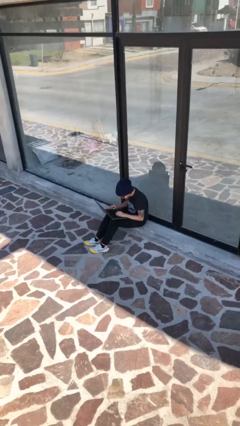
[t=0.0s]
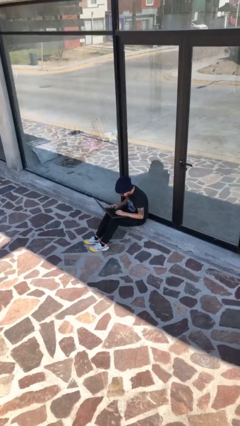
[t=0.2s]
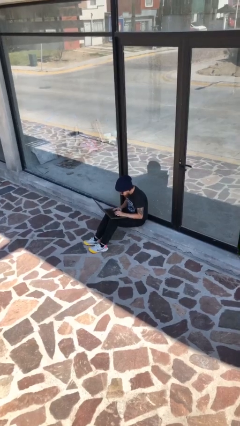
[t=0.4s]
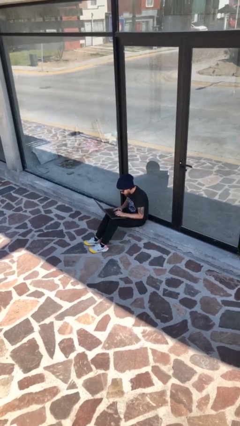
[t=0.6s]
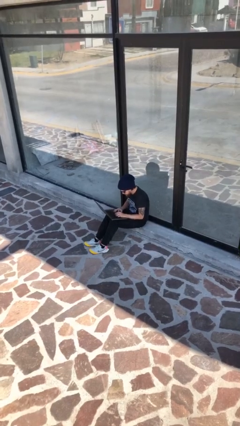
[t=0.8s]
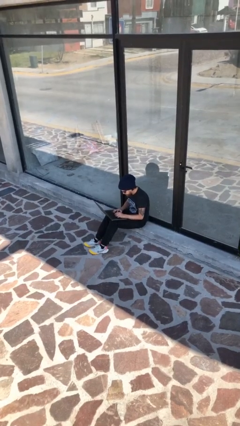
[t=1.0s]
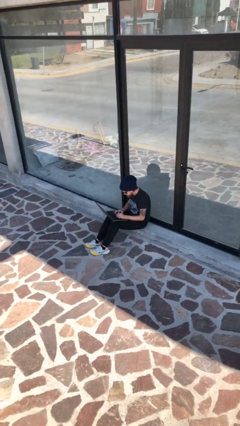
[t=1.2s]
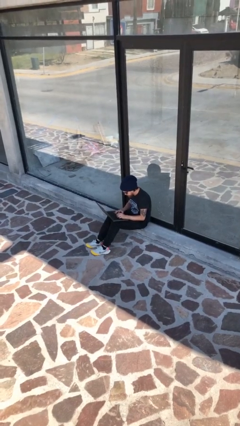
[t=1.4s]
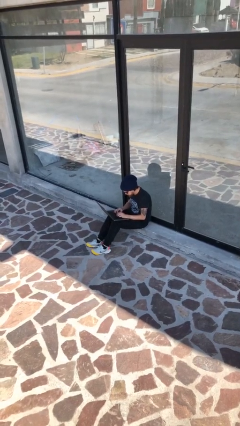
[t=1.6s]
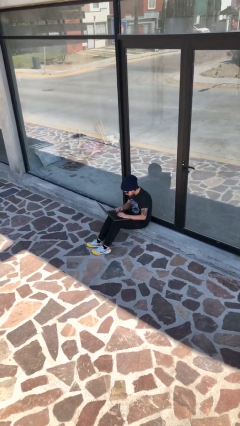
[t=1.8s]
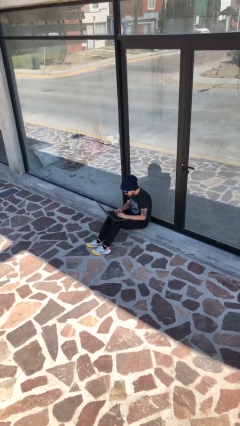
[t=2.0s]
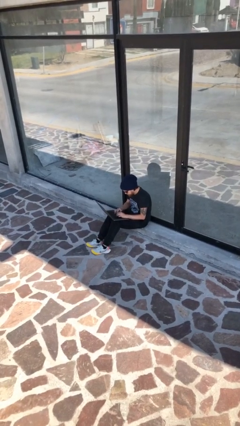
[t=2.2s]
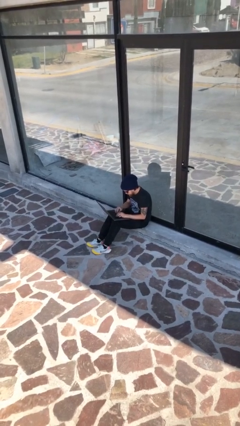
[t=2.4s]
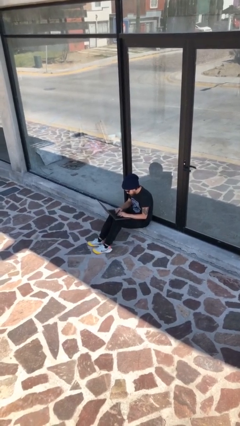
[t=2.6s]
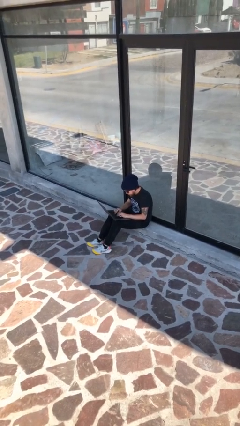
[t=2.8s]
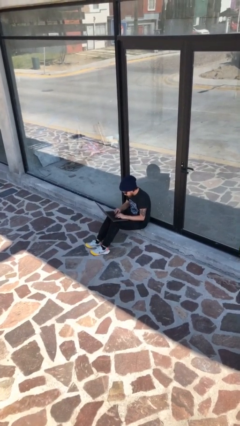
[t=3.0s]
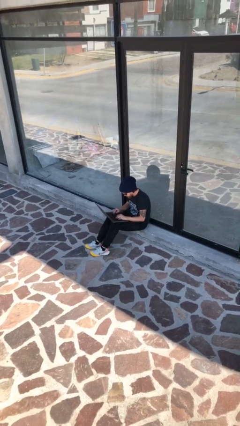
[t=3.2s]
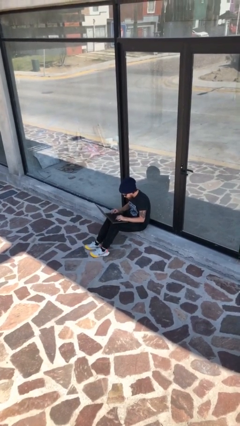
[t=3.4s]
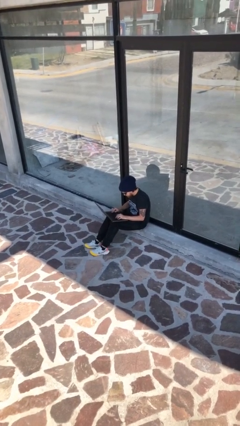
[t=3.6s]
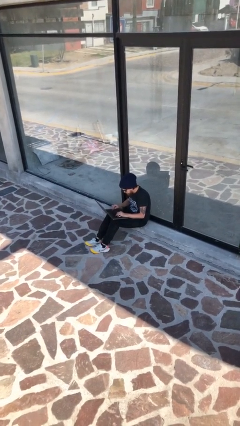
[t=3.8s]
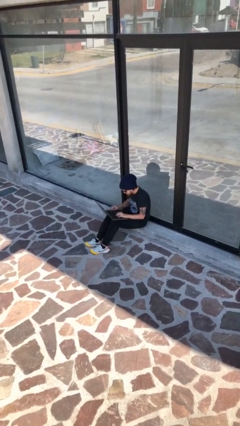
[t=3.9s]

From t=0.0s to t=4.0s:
person interacts with laptop

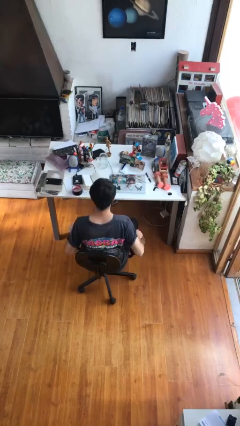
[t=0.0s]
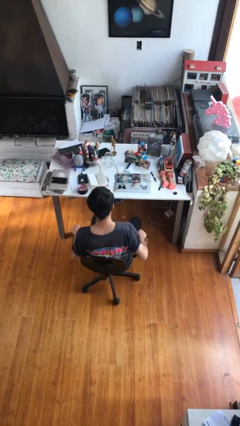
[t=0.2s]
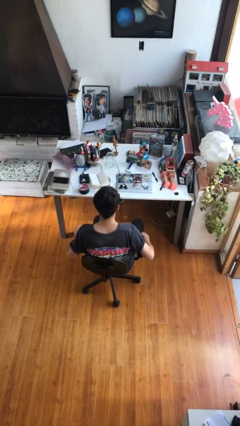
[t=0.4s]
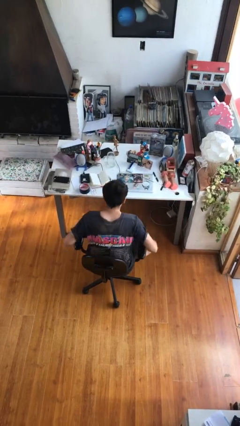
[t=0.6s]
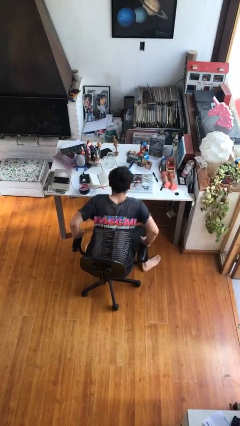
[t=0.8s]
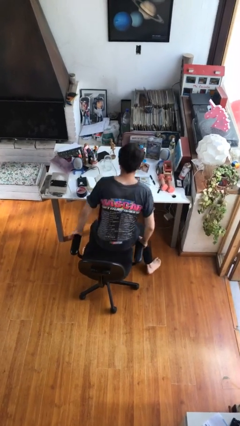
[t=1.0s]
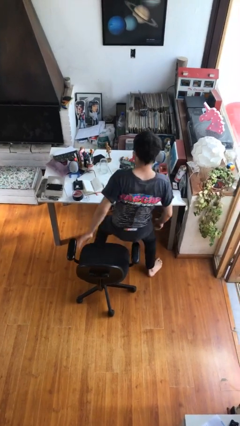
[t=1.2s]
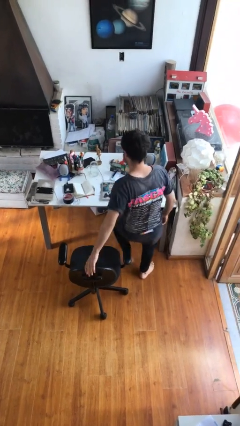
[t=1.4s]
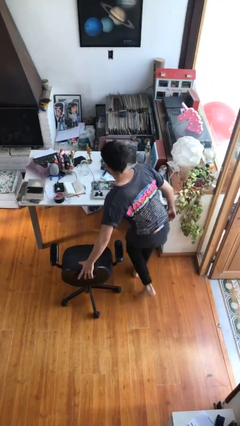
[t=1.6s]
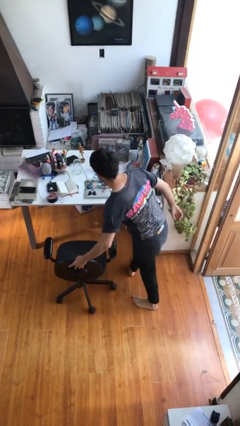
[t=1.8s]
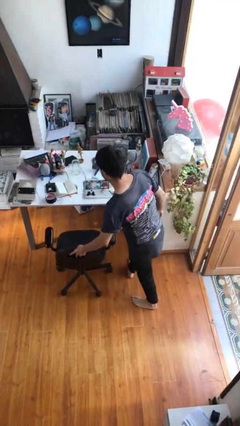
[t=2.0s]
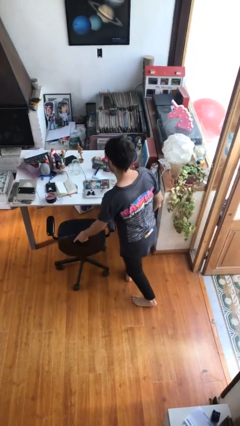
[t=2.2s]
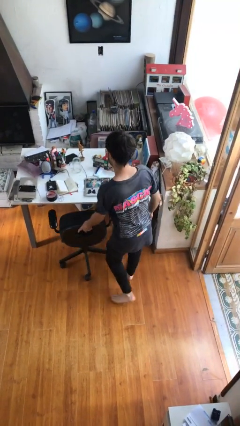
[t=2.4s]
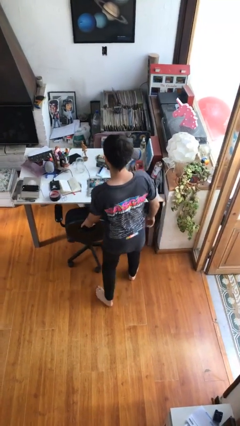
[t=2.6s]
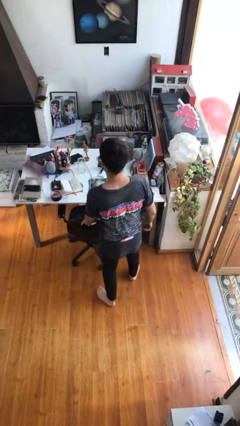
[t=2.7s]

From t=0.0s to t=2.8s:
person stands up

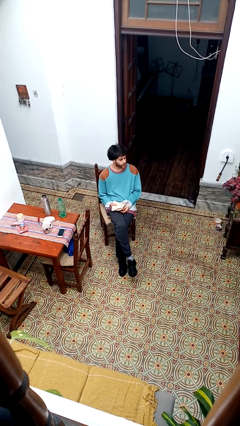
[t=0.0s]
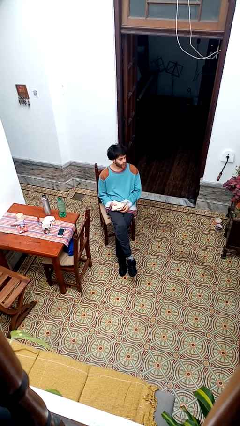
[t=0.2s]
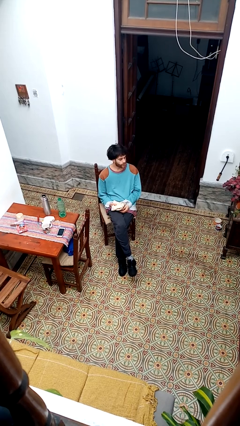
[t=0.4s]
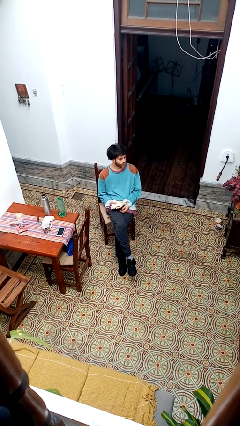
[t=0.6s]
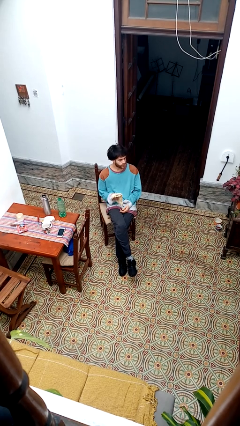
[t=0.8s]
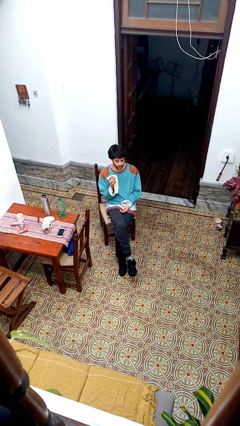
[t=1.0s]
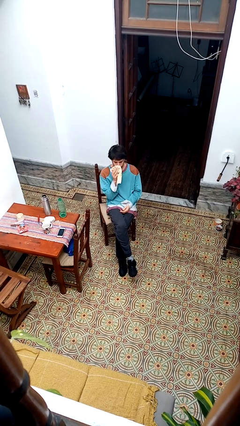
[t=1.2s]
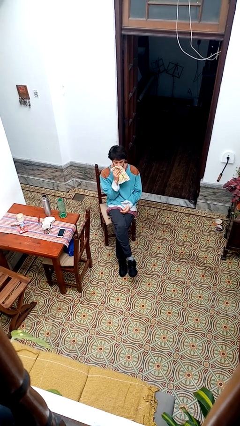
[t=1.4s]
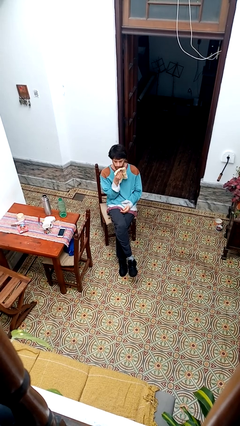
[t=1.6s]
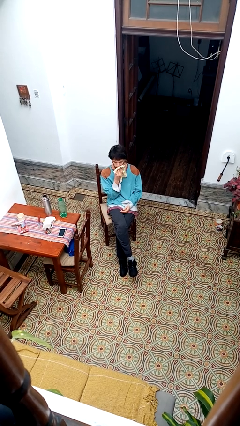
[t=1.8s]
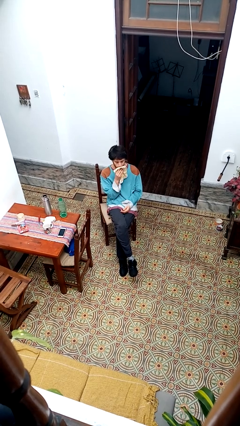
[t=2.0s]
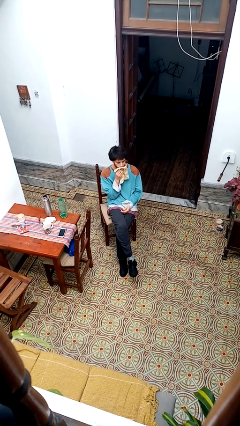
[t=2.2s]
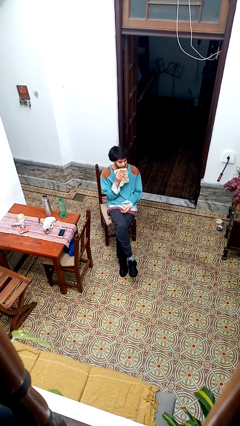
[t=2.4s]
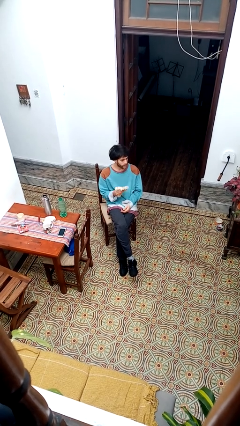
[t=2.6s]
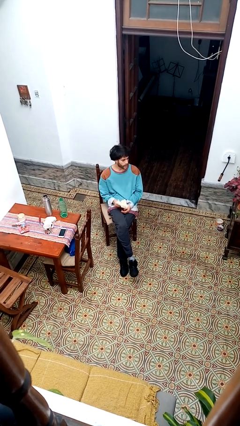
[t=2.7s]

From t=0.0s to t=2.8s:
person wipes mouth with napkin

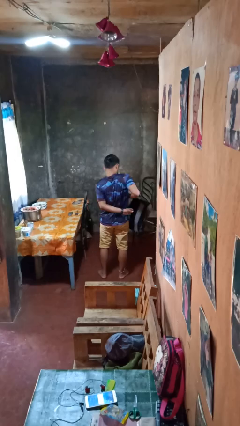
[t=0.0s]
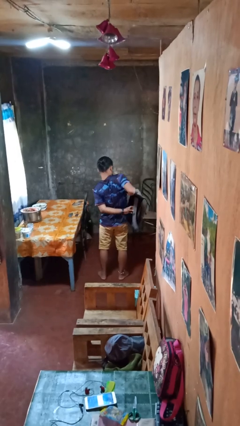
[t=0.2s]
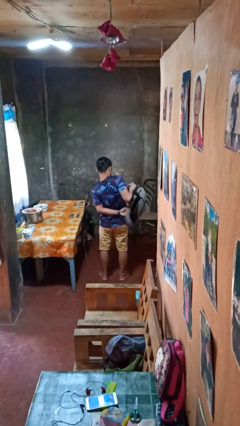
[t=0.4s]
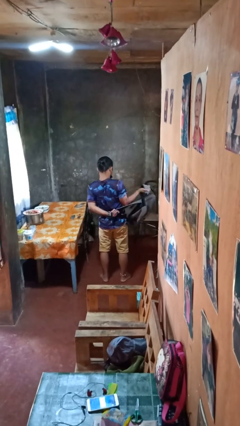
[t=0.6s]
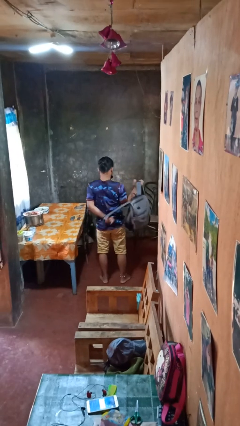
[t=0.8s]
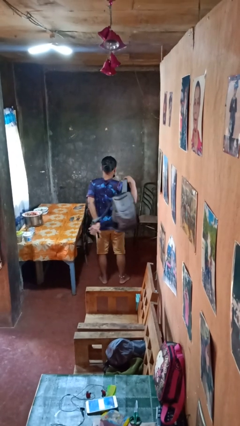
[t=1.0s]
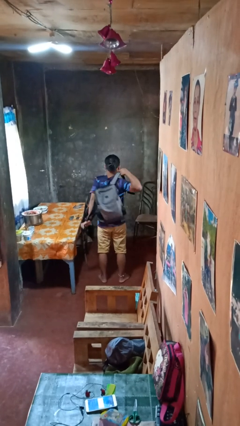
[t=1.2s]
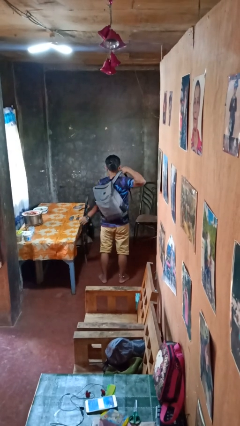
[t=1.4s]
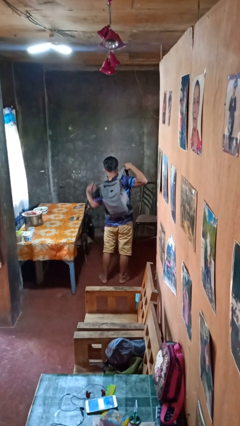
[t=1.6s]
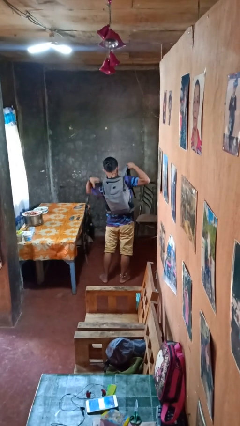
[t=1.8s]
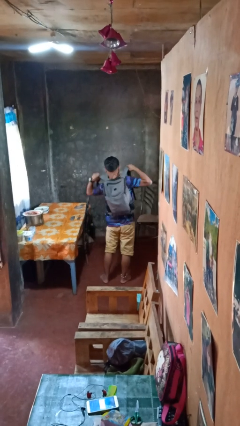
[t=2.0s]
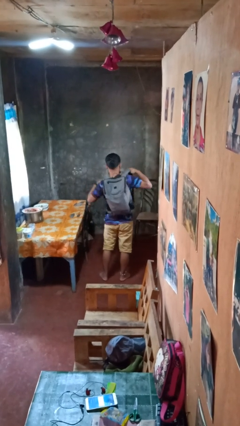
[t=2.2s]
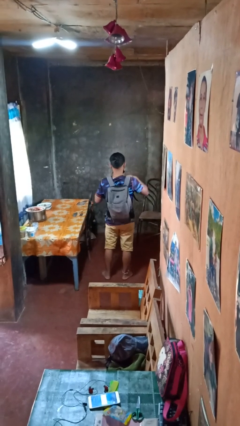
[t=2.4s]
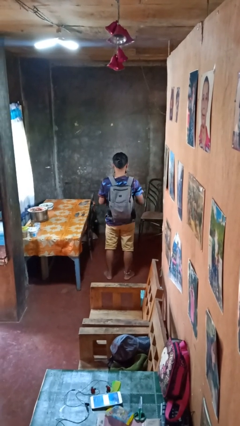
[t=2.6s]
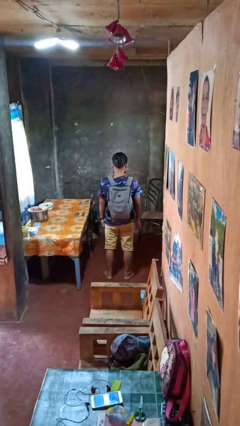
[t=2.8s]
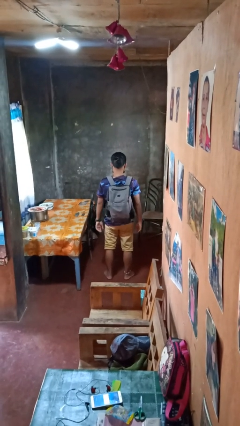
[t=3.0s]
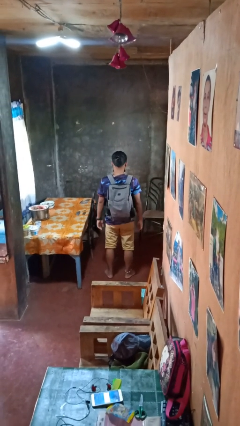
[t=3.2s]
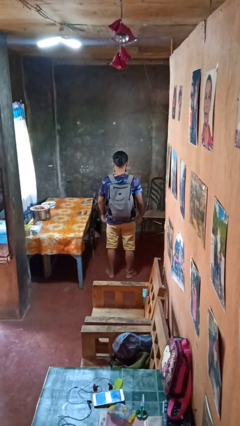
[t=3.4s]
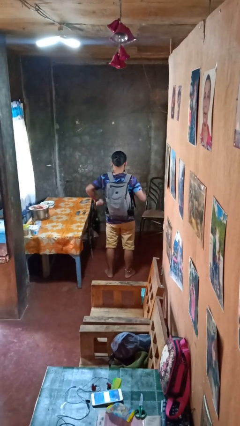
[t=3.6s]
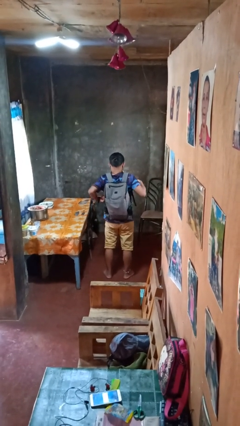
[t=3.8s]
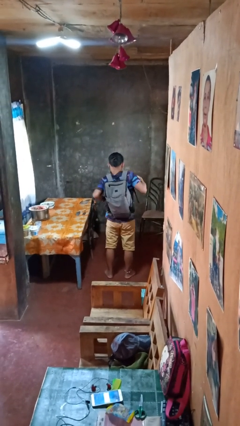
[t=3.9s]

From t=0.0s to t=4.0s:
person puts on backpack

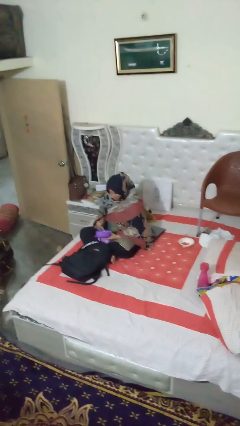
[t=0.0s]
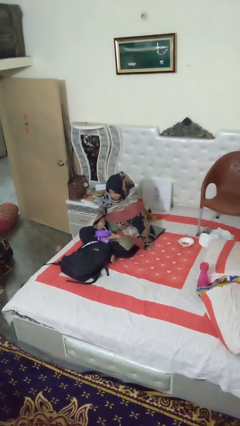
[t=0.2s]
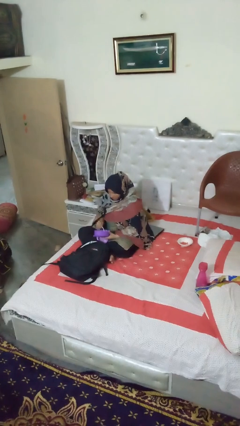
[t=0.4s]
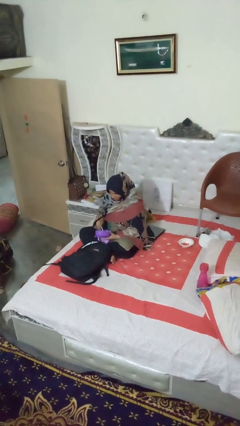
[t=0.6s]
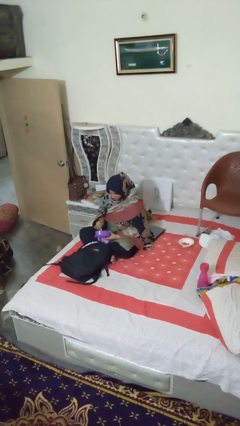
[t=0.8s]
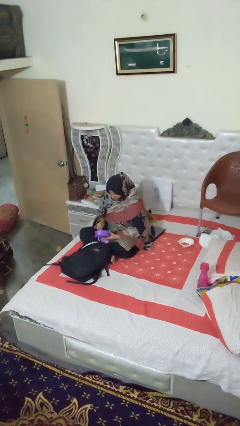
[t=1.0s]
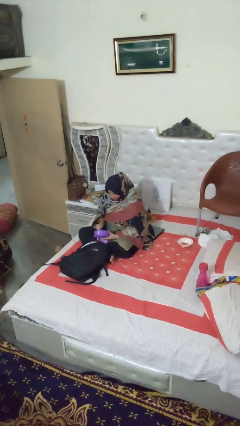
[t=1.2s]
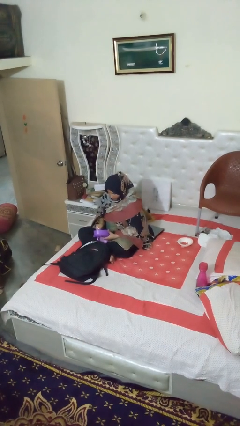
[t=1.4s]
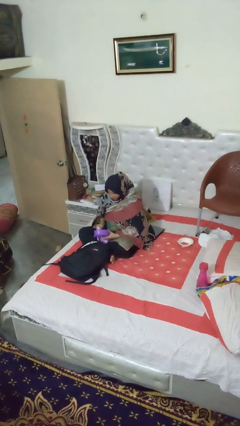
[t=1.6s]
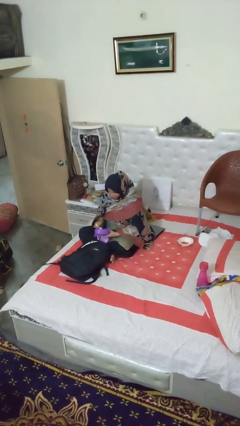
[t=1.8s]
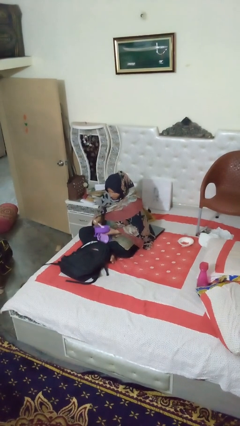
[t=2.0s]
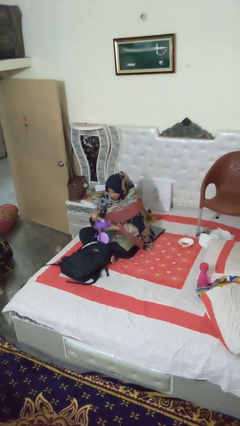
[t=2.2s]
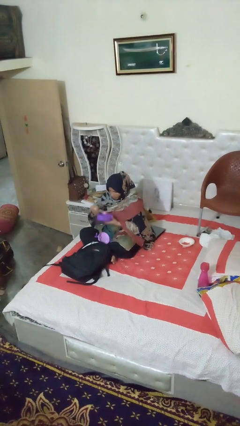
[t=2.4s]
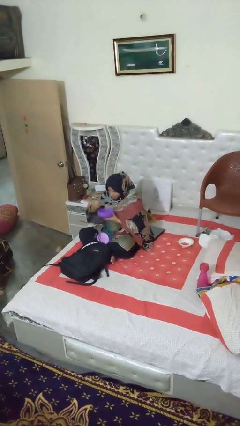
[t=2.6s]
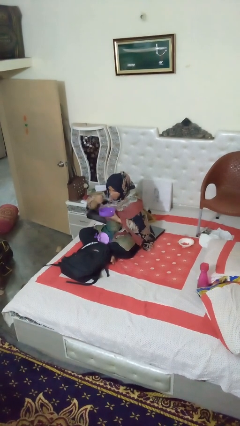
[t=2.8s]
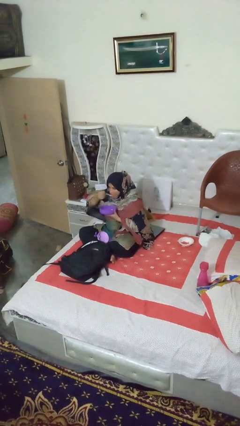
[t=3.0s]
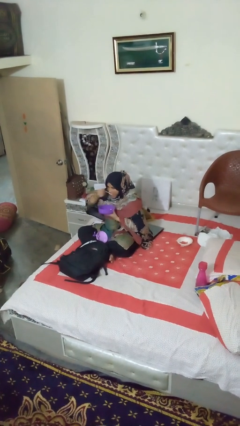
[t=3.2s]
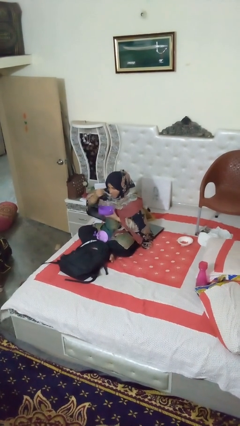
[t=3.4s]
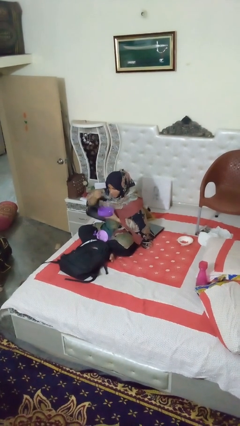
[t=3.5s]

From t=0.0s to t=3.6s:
person eats snack from bag

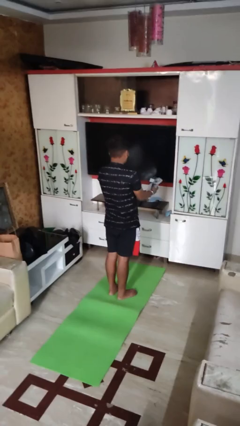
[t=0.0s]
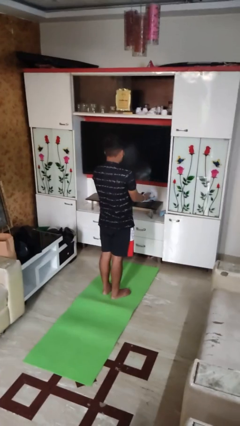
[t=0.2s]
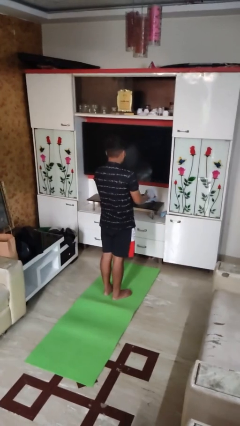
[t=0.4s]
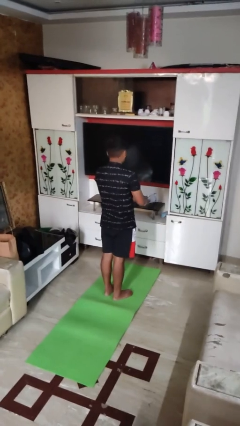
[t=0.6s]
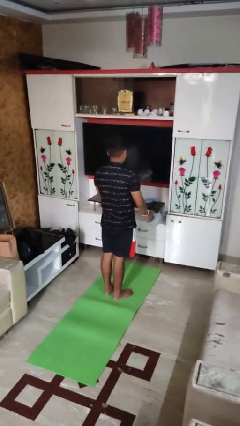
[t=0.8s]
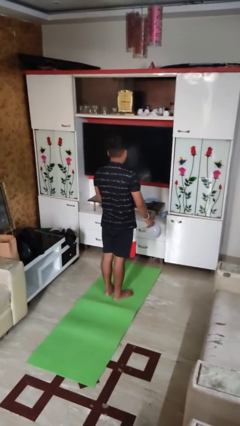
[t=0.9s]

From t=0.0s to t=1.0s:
person catches dropped object
